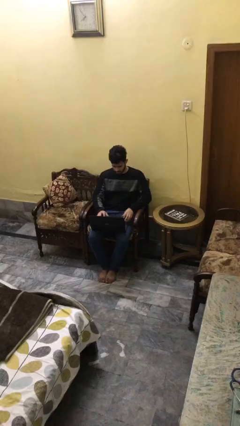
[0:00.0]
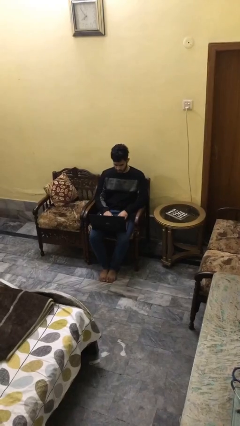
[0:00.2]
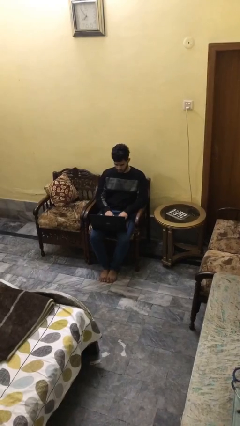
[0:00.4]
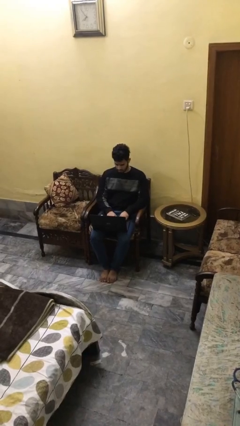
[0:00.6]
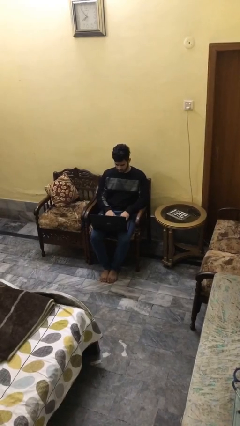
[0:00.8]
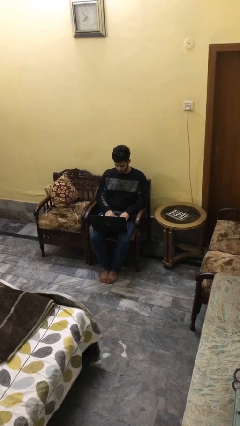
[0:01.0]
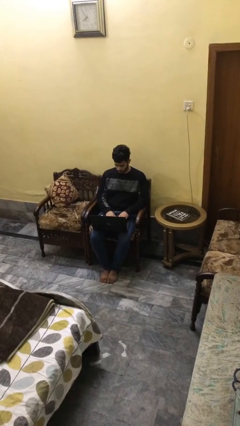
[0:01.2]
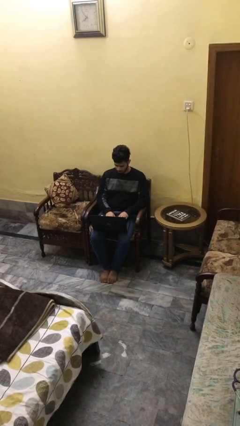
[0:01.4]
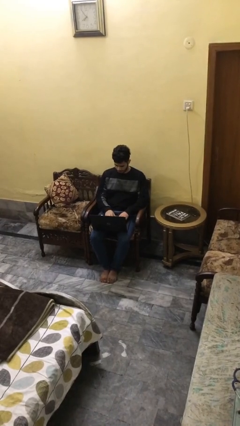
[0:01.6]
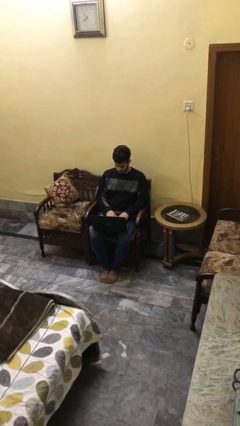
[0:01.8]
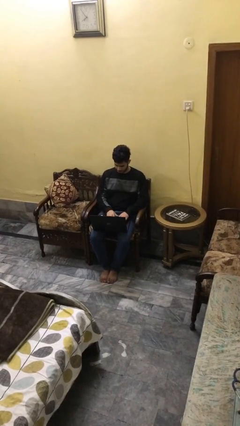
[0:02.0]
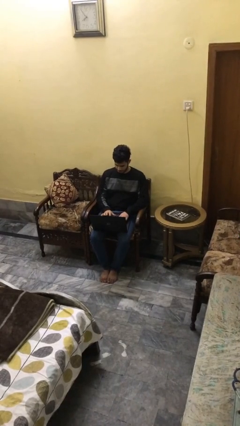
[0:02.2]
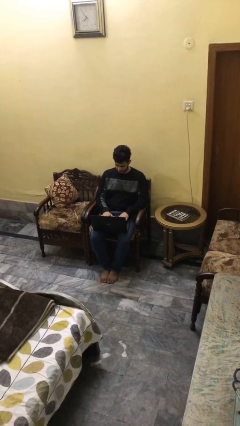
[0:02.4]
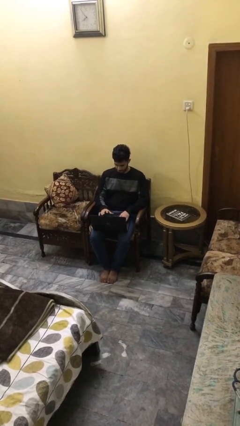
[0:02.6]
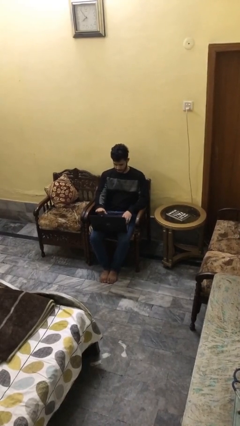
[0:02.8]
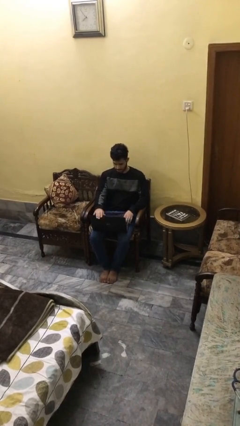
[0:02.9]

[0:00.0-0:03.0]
person interacts with laptop

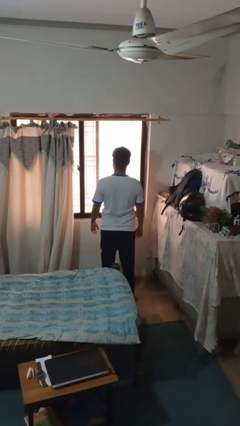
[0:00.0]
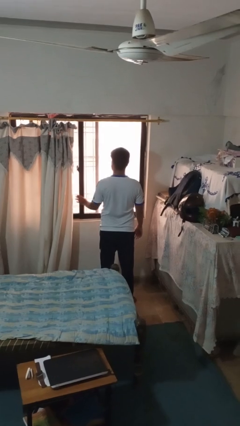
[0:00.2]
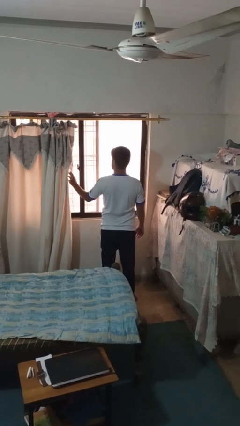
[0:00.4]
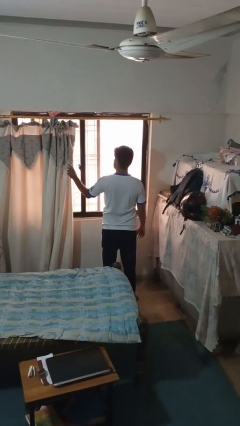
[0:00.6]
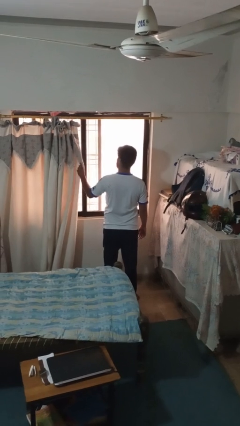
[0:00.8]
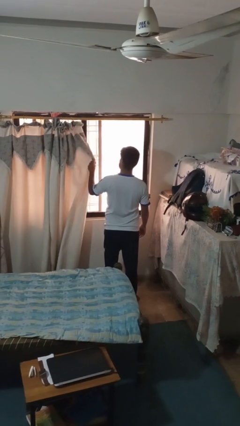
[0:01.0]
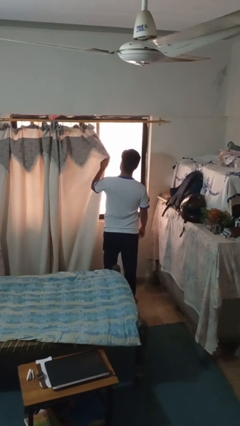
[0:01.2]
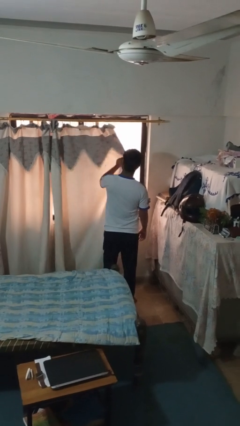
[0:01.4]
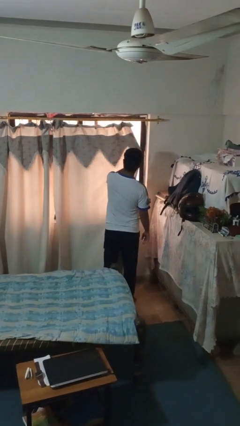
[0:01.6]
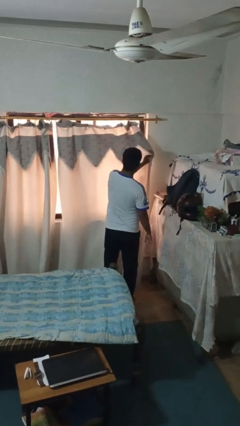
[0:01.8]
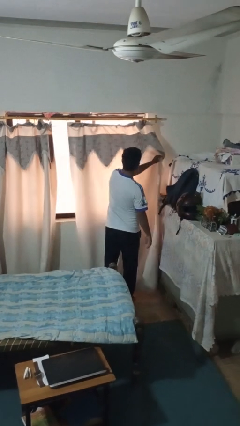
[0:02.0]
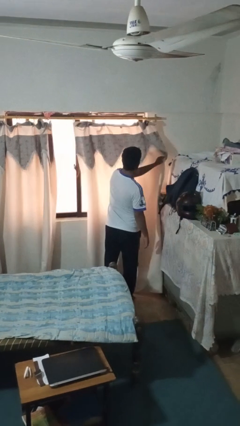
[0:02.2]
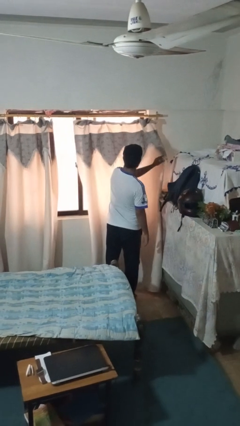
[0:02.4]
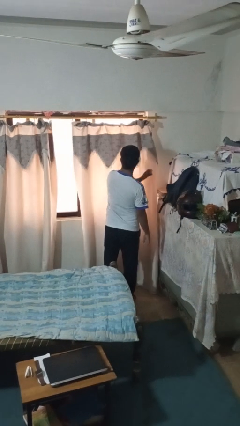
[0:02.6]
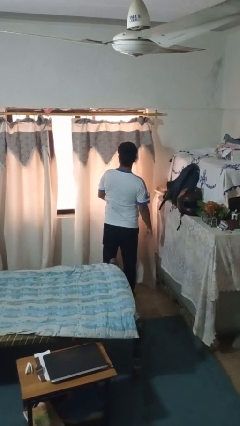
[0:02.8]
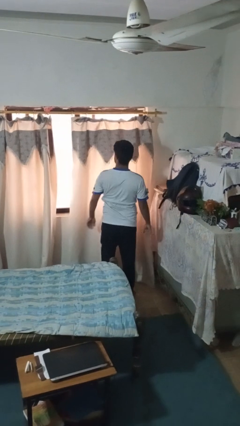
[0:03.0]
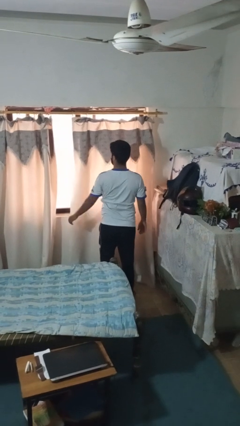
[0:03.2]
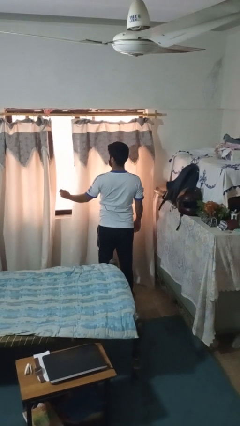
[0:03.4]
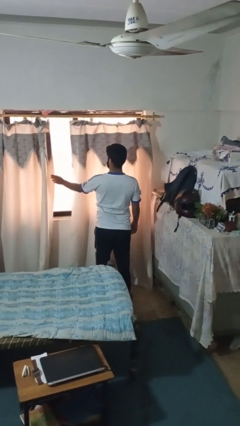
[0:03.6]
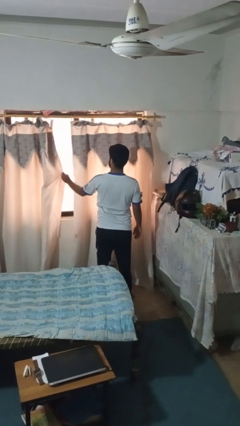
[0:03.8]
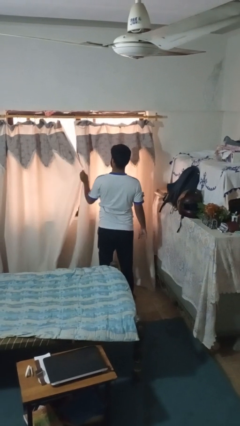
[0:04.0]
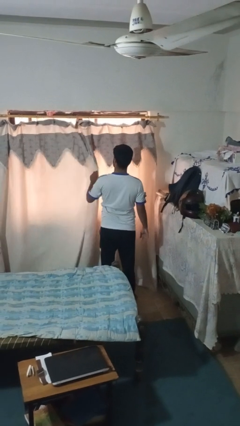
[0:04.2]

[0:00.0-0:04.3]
person closes curtains

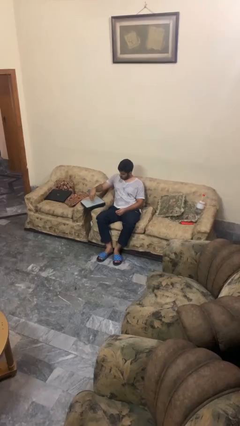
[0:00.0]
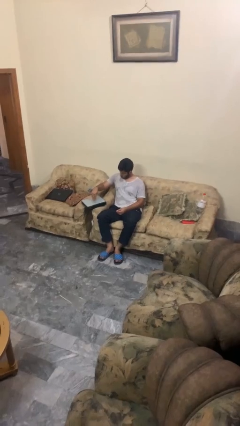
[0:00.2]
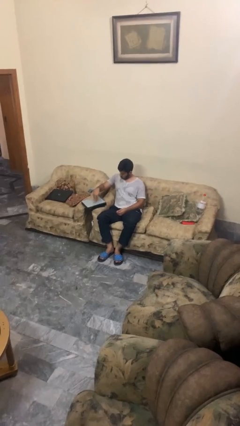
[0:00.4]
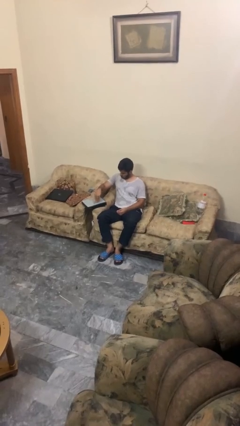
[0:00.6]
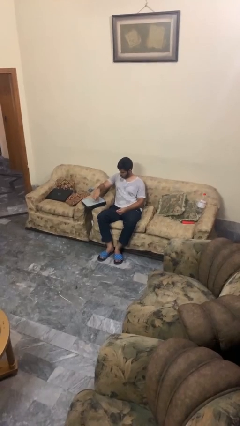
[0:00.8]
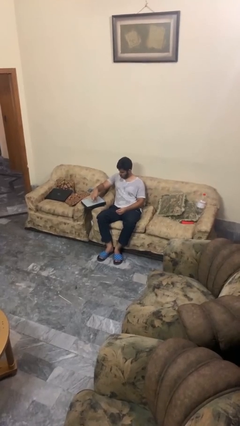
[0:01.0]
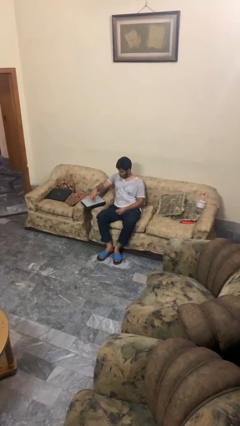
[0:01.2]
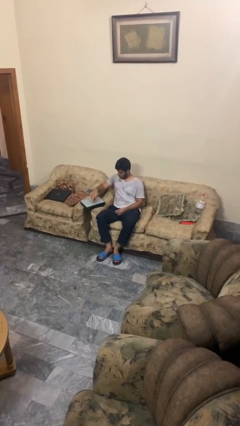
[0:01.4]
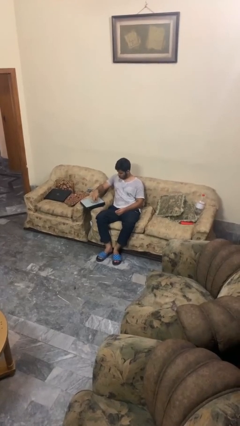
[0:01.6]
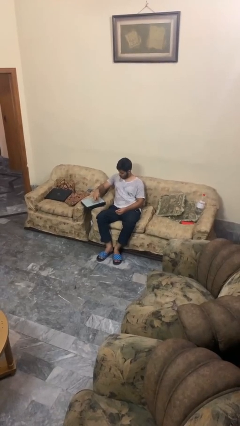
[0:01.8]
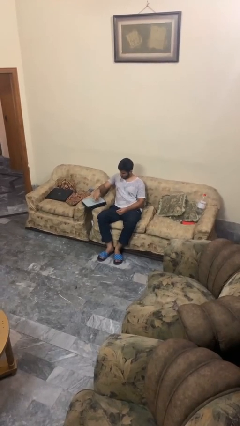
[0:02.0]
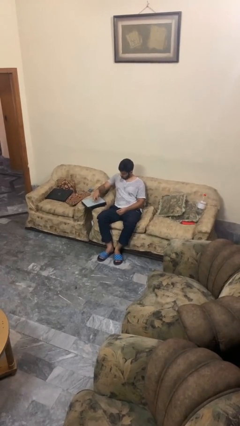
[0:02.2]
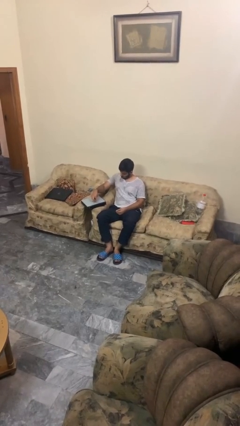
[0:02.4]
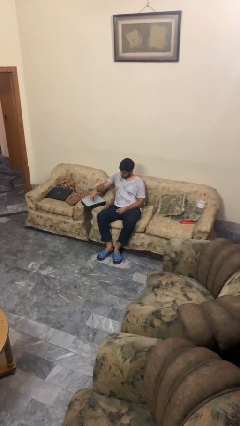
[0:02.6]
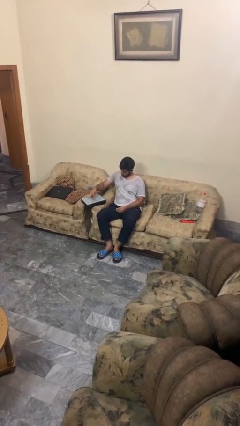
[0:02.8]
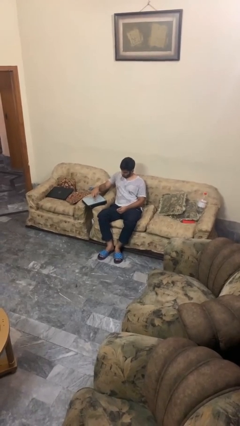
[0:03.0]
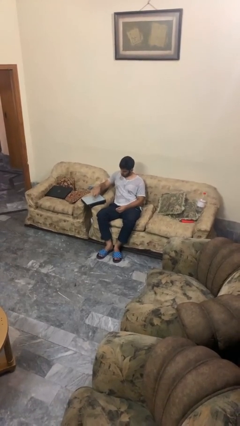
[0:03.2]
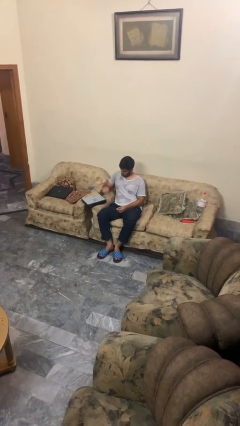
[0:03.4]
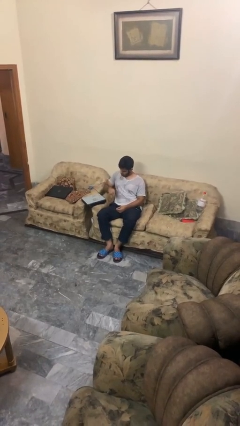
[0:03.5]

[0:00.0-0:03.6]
person taps object with finger

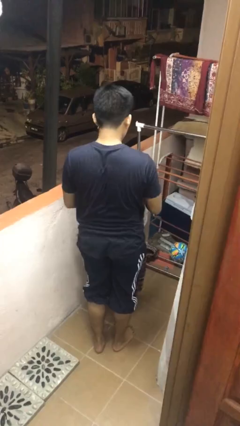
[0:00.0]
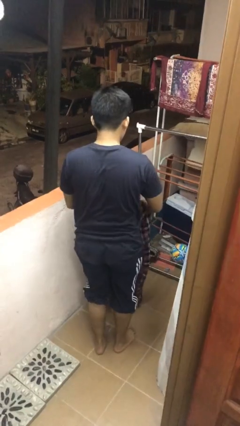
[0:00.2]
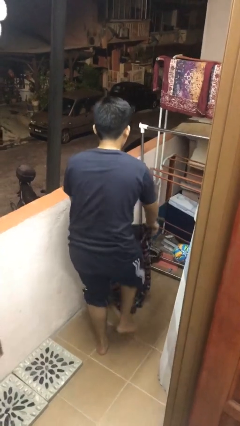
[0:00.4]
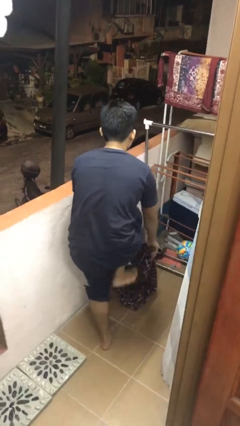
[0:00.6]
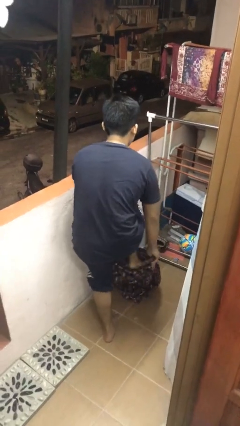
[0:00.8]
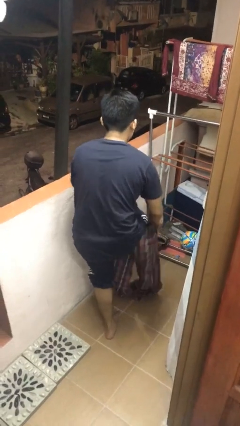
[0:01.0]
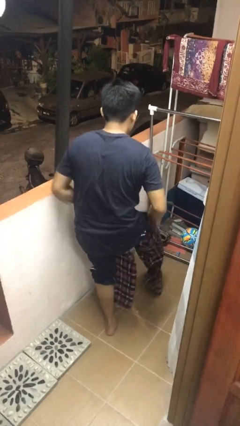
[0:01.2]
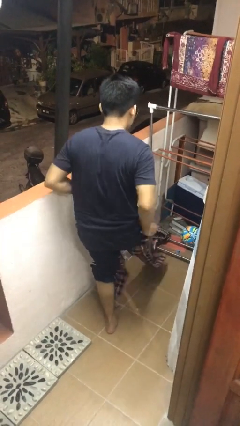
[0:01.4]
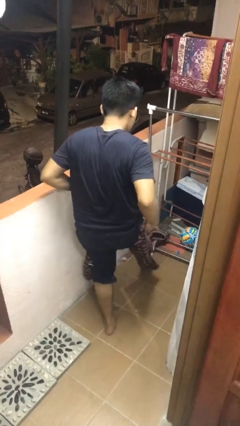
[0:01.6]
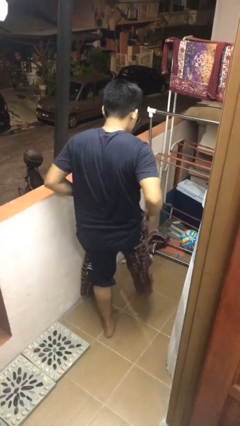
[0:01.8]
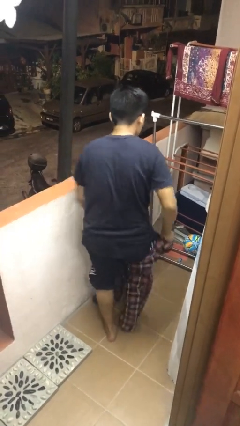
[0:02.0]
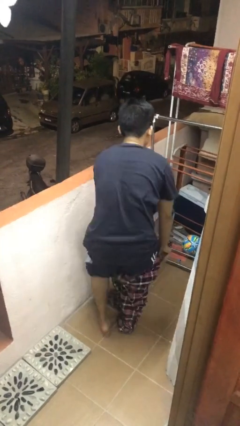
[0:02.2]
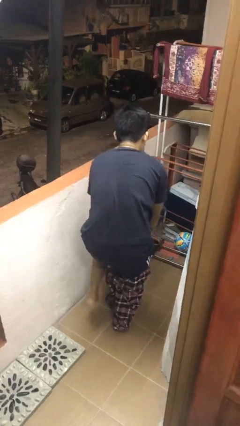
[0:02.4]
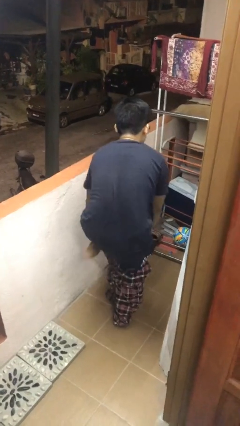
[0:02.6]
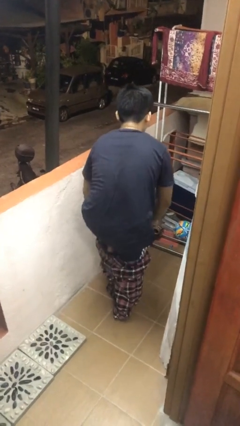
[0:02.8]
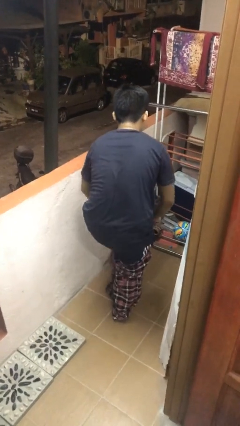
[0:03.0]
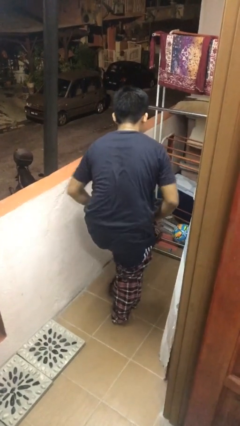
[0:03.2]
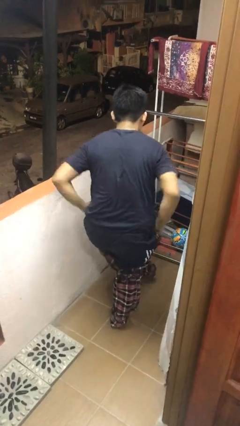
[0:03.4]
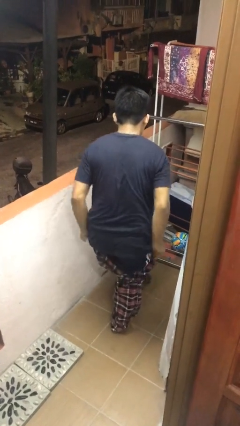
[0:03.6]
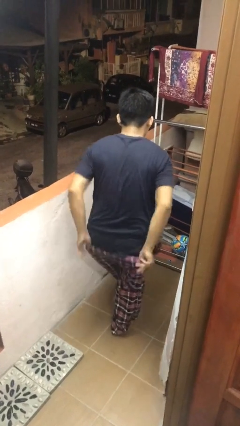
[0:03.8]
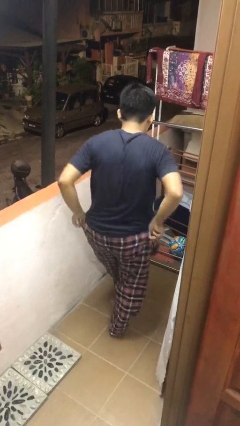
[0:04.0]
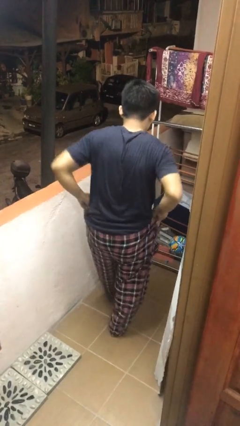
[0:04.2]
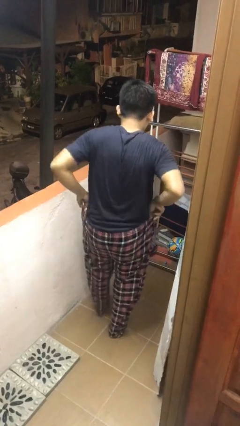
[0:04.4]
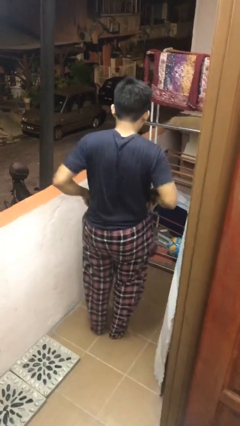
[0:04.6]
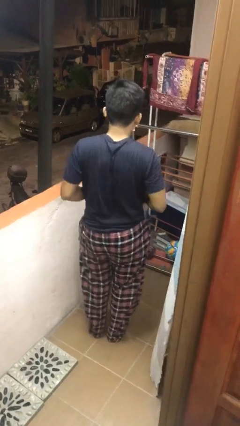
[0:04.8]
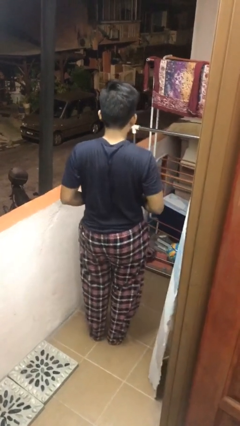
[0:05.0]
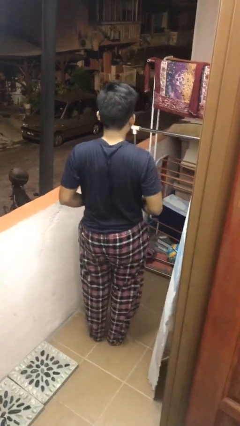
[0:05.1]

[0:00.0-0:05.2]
person puts on pants

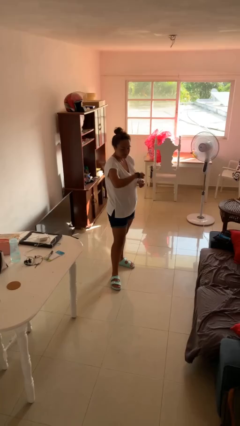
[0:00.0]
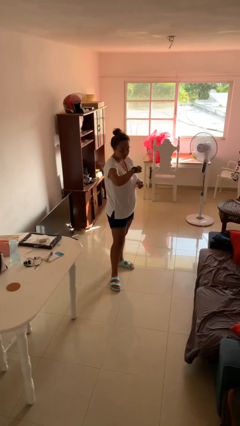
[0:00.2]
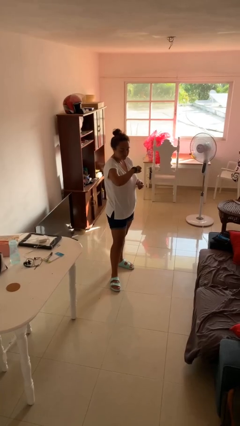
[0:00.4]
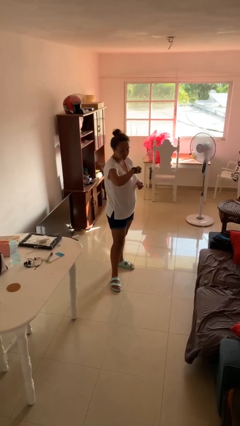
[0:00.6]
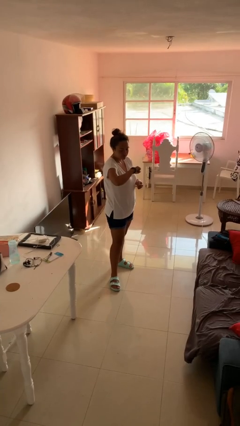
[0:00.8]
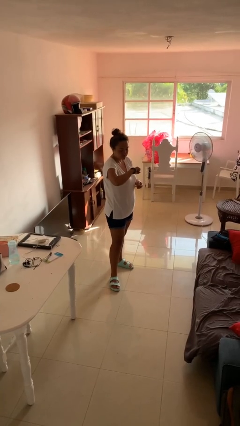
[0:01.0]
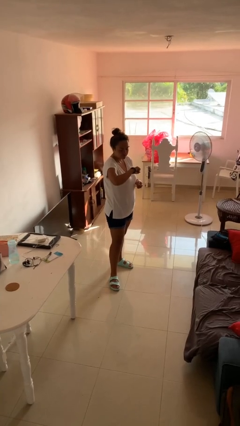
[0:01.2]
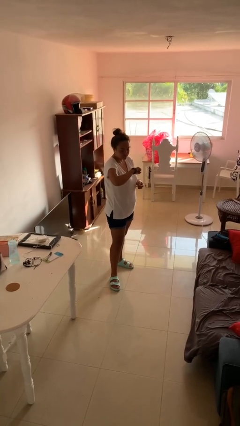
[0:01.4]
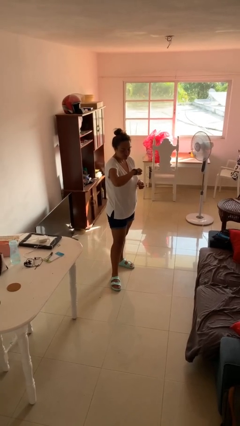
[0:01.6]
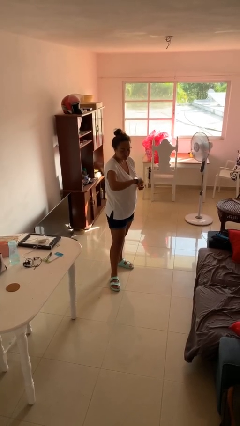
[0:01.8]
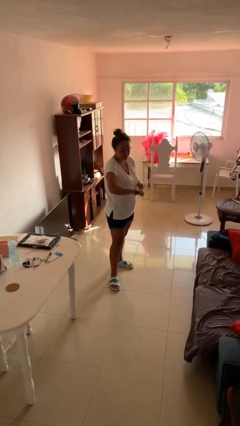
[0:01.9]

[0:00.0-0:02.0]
person looks at wristwatch
